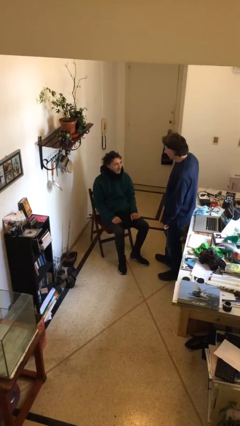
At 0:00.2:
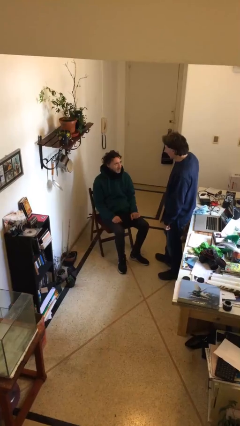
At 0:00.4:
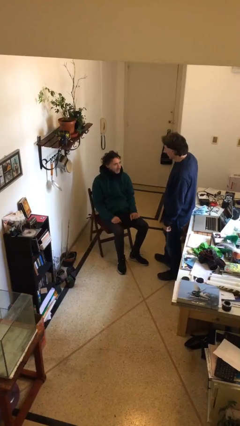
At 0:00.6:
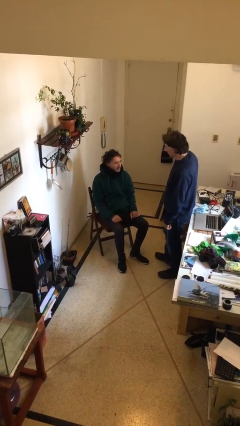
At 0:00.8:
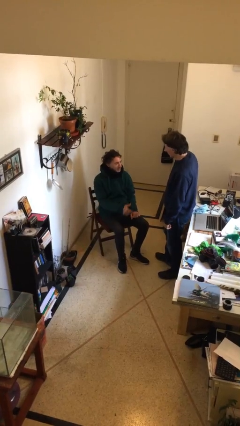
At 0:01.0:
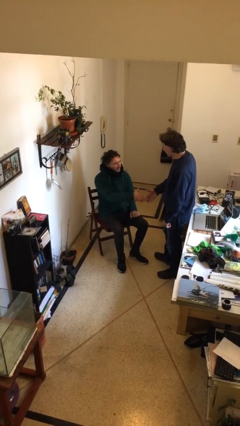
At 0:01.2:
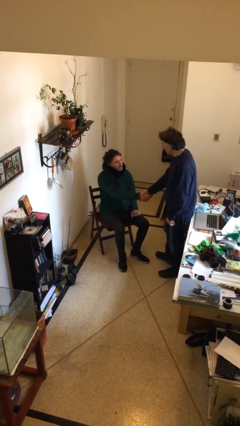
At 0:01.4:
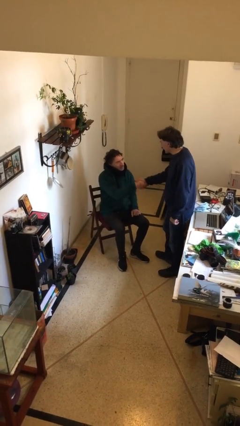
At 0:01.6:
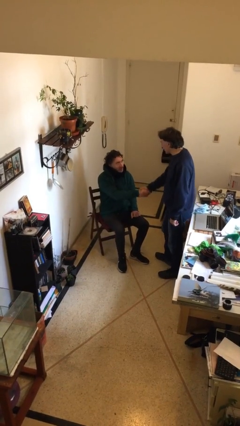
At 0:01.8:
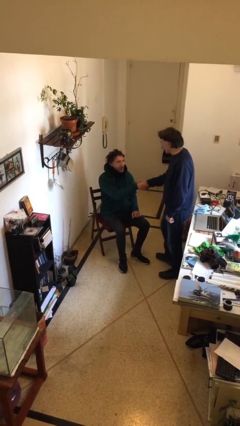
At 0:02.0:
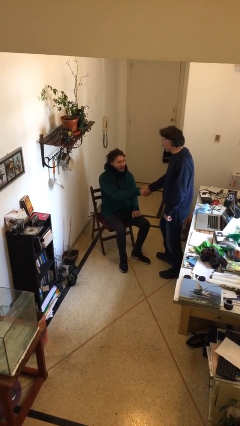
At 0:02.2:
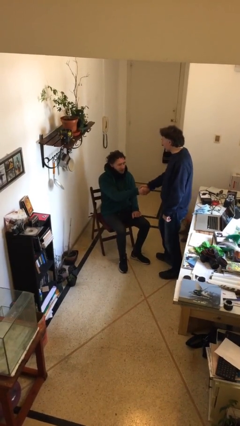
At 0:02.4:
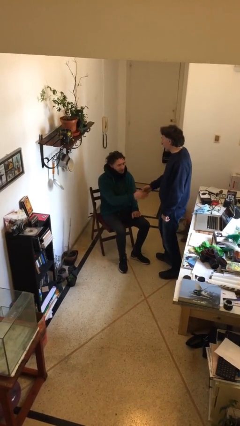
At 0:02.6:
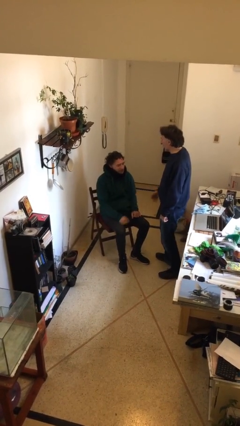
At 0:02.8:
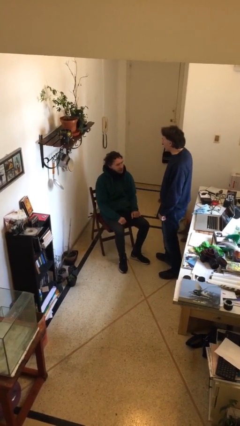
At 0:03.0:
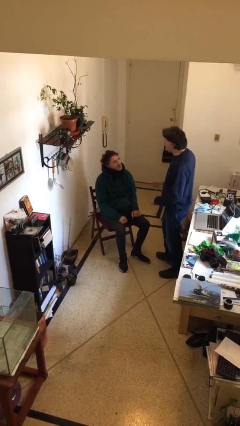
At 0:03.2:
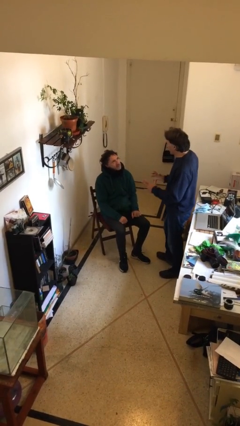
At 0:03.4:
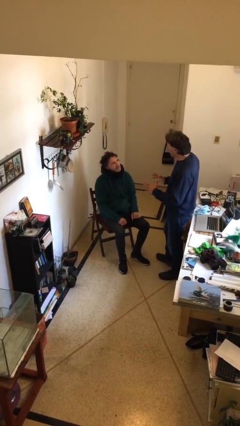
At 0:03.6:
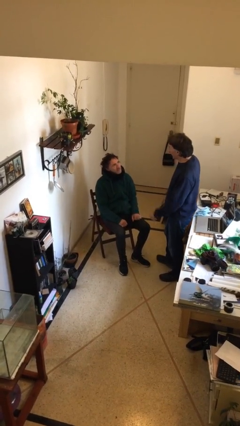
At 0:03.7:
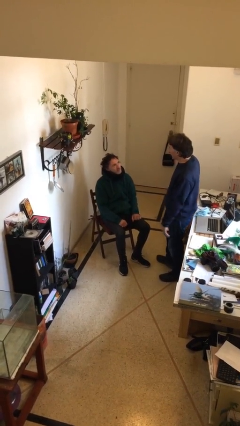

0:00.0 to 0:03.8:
person shakes hand

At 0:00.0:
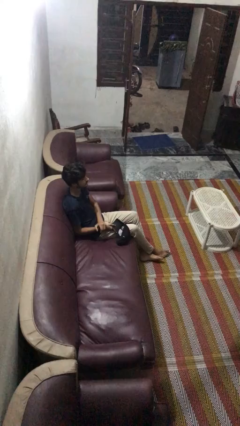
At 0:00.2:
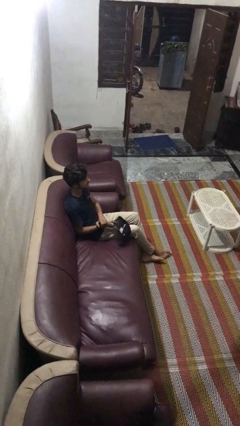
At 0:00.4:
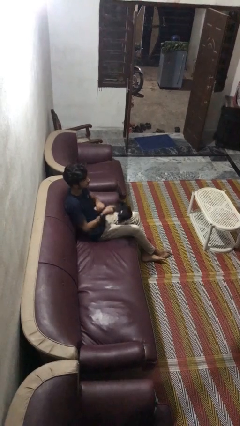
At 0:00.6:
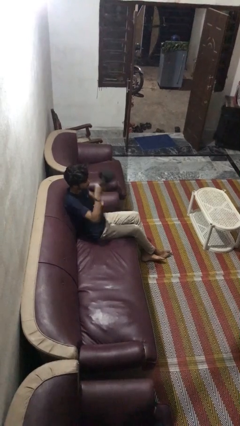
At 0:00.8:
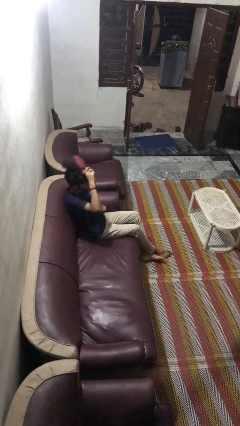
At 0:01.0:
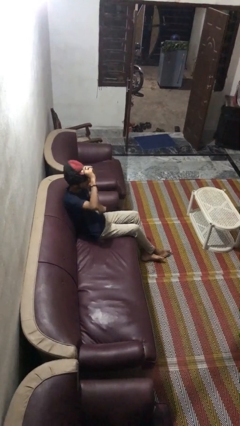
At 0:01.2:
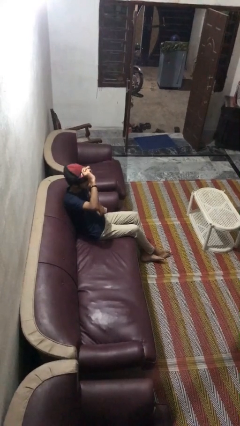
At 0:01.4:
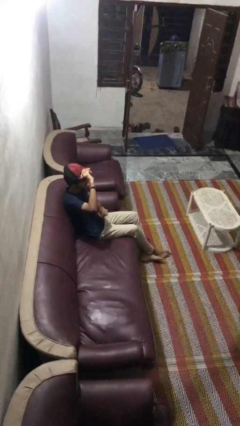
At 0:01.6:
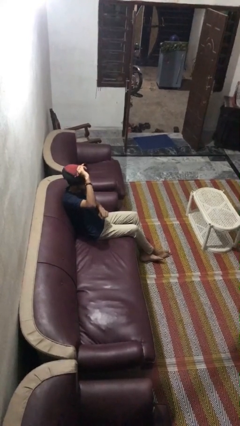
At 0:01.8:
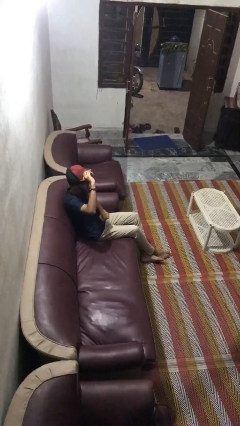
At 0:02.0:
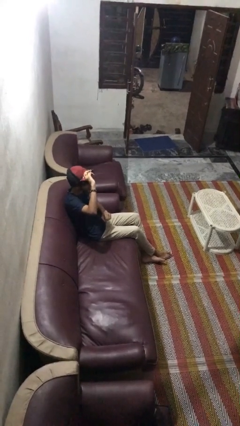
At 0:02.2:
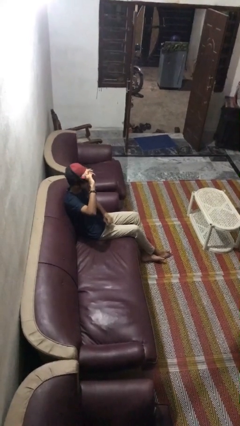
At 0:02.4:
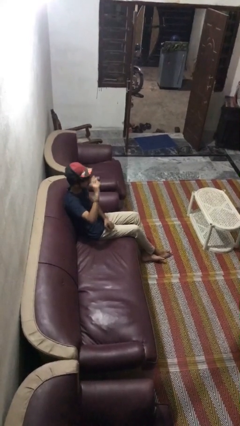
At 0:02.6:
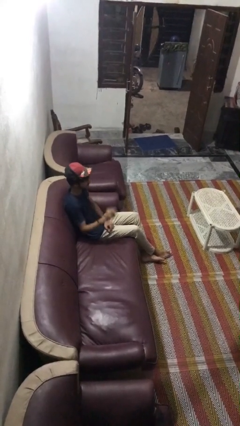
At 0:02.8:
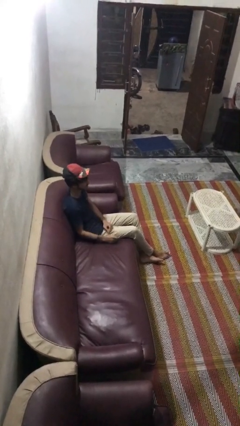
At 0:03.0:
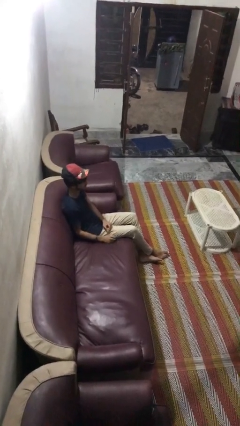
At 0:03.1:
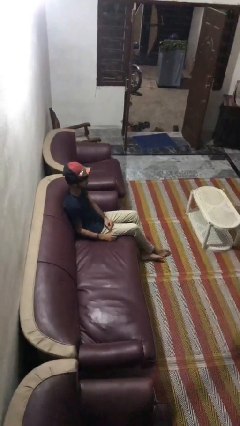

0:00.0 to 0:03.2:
person puts on hat

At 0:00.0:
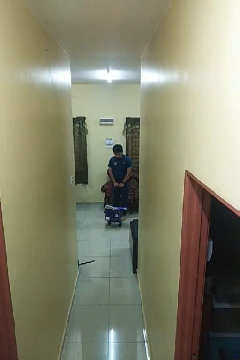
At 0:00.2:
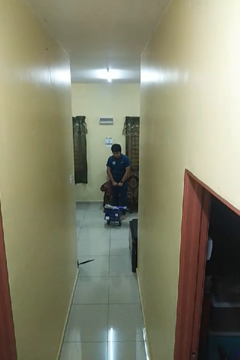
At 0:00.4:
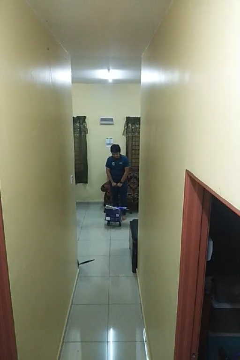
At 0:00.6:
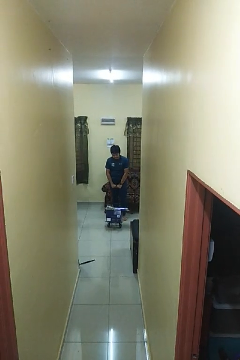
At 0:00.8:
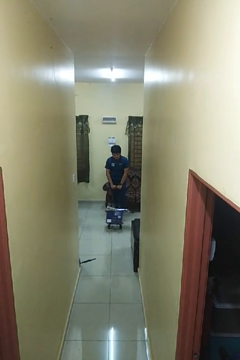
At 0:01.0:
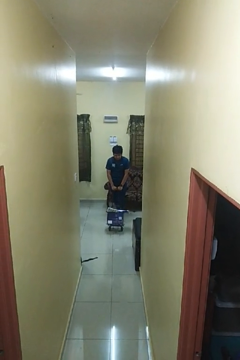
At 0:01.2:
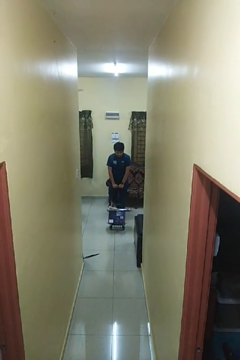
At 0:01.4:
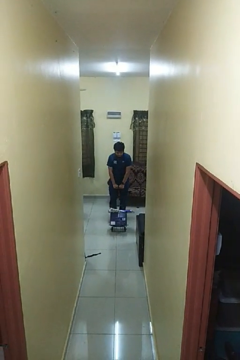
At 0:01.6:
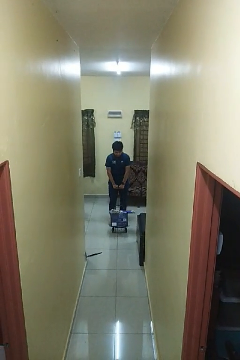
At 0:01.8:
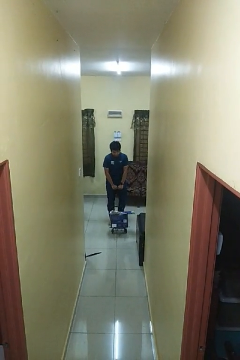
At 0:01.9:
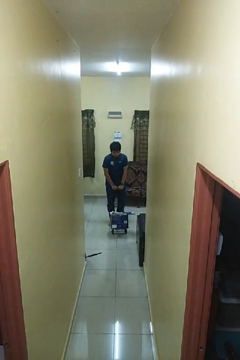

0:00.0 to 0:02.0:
person pushes wheeled cart

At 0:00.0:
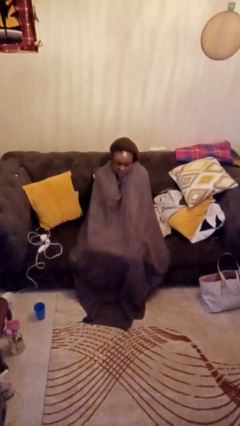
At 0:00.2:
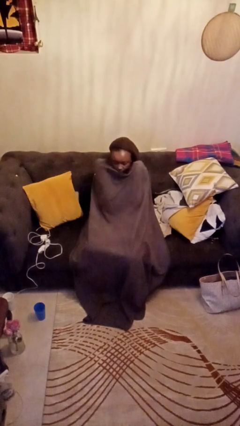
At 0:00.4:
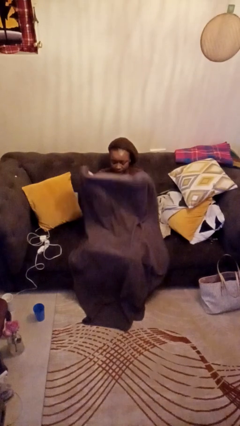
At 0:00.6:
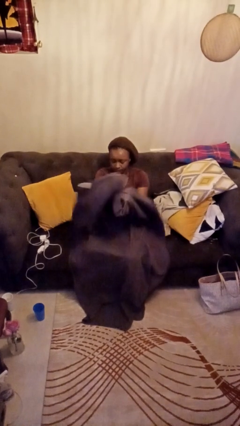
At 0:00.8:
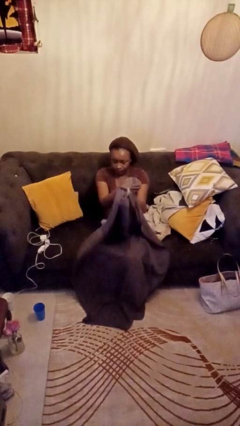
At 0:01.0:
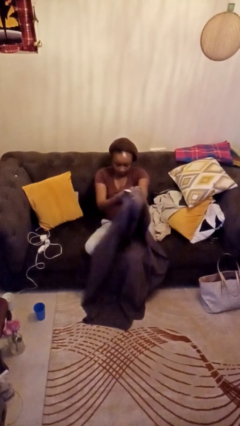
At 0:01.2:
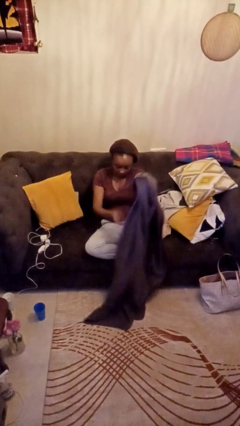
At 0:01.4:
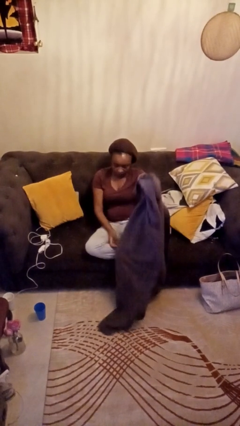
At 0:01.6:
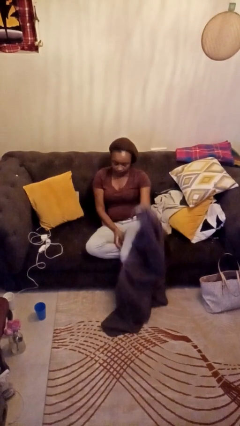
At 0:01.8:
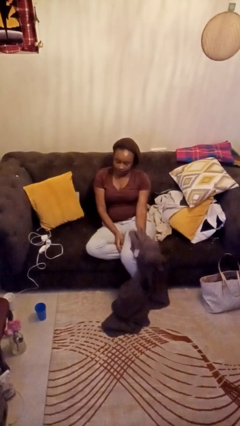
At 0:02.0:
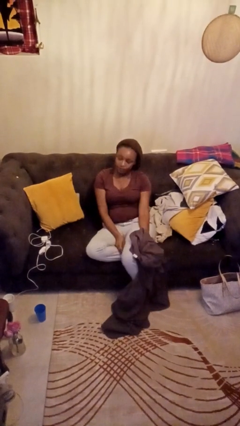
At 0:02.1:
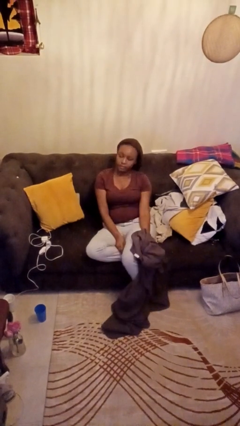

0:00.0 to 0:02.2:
person uncovers with blanket

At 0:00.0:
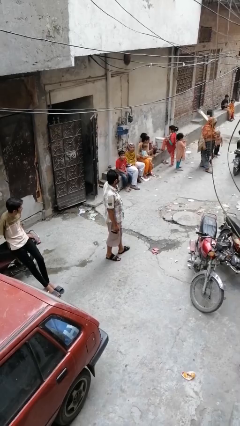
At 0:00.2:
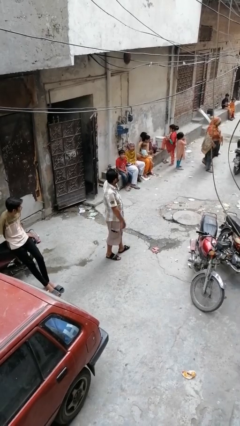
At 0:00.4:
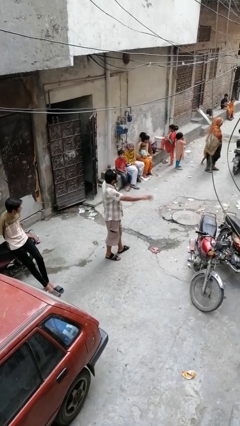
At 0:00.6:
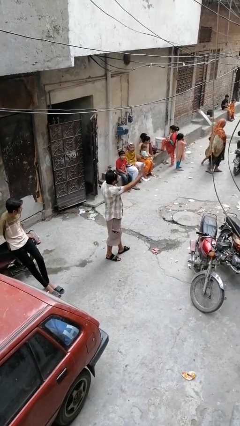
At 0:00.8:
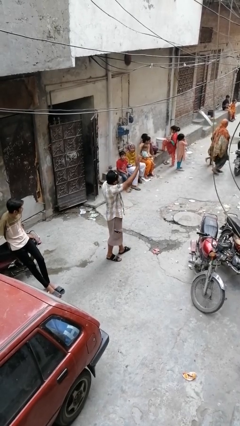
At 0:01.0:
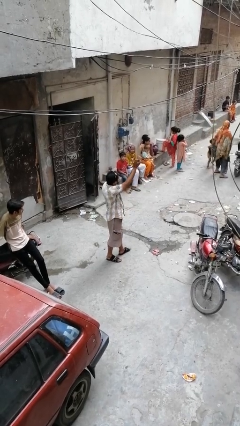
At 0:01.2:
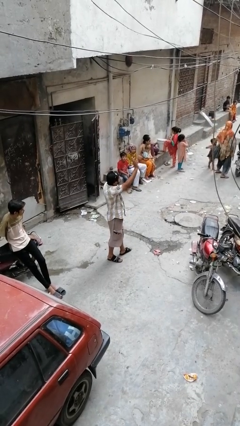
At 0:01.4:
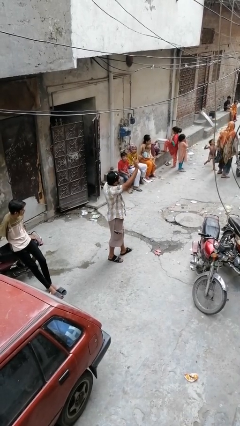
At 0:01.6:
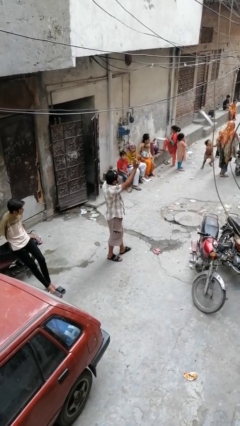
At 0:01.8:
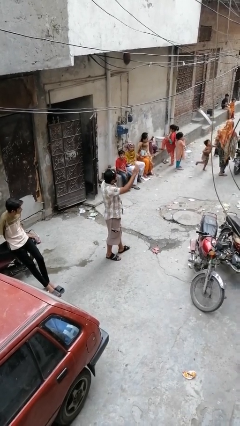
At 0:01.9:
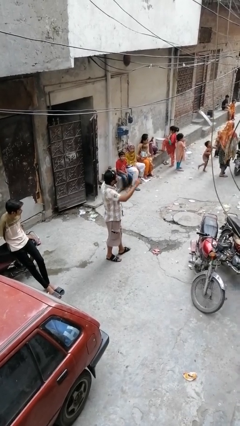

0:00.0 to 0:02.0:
person waves at person

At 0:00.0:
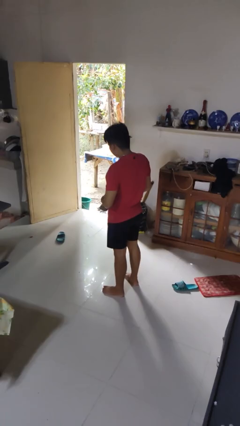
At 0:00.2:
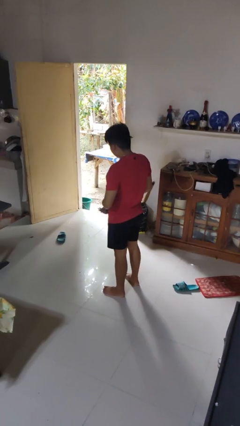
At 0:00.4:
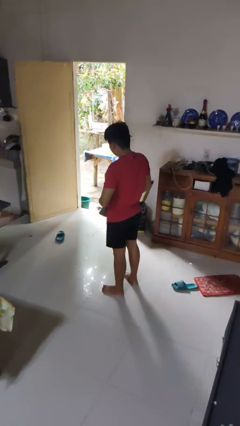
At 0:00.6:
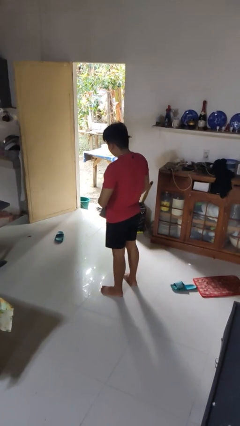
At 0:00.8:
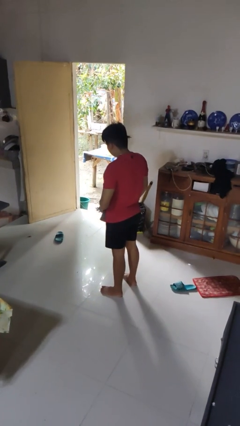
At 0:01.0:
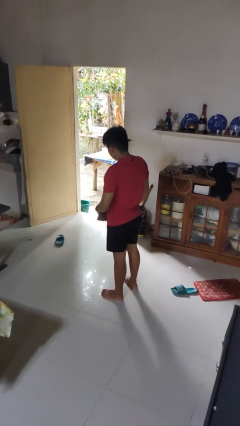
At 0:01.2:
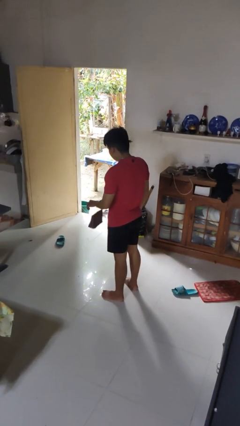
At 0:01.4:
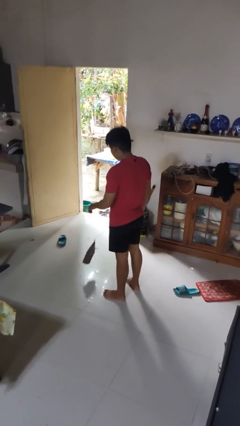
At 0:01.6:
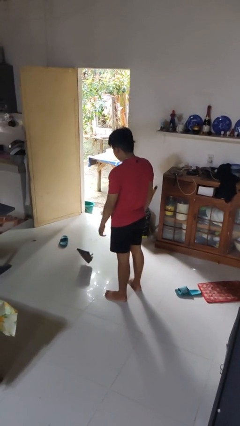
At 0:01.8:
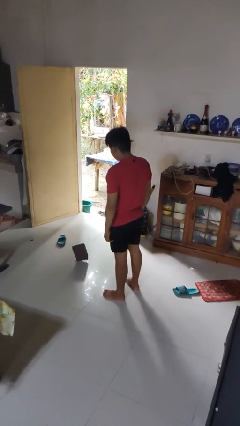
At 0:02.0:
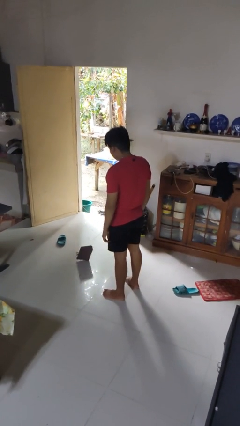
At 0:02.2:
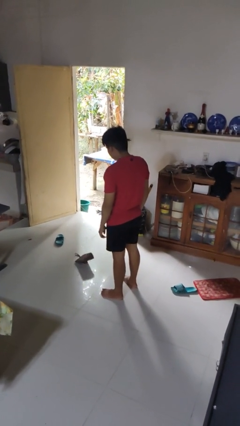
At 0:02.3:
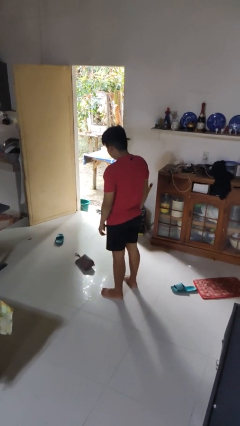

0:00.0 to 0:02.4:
person throws object to ground

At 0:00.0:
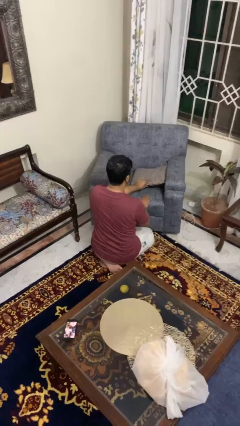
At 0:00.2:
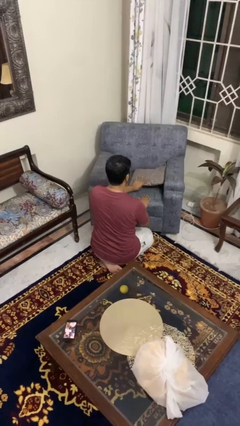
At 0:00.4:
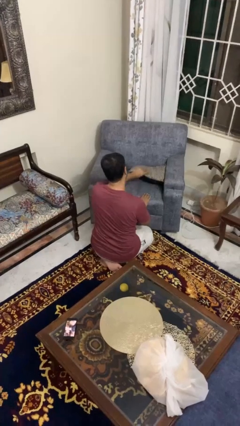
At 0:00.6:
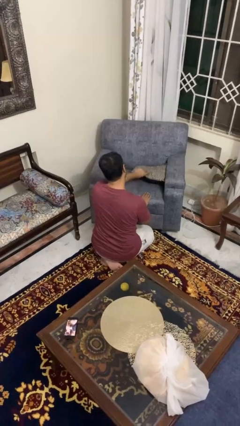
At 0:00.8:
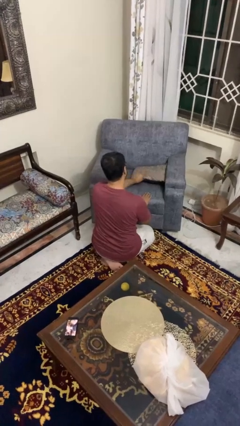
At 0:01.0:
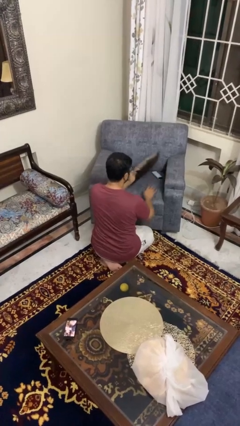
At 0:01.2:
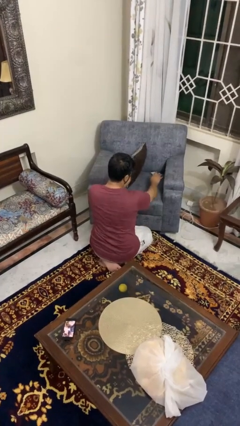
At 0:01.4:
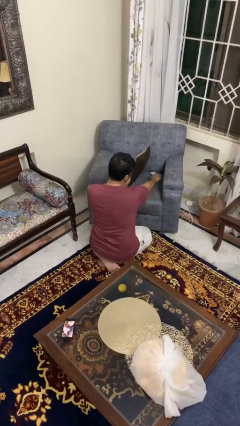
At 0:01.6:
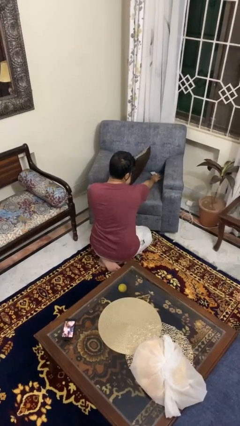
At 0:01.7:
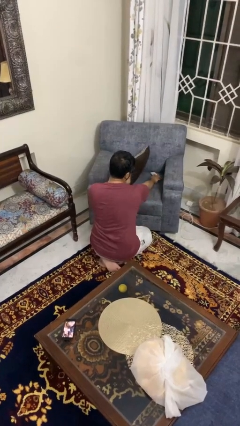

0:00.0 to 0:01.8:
person searches in couch
